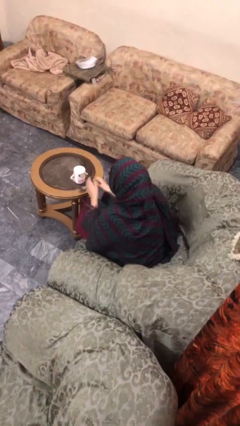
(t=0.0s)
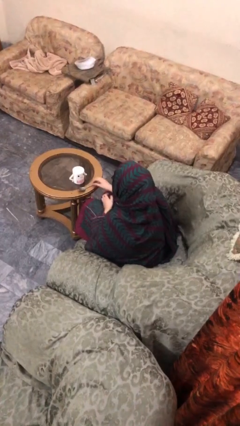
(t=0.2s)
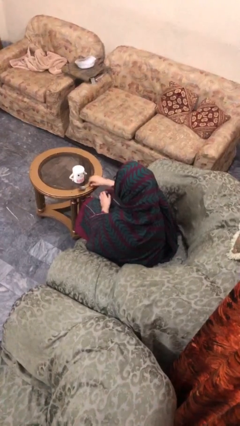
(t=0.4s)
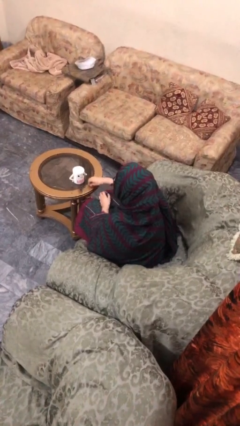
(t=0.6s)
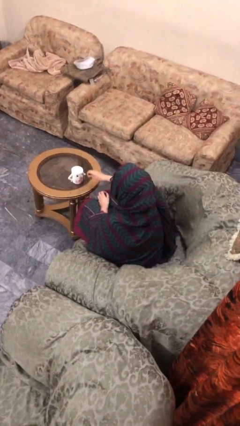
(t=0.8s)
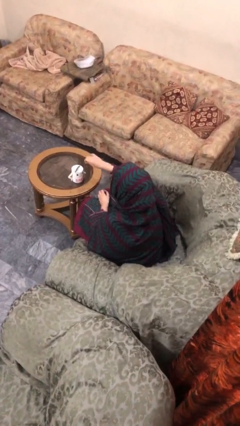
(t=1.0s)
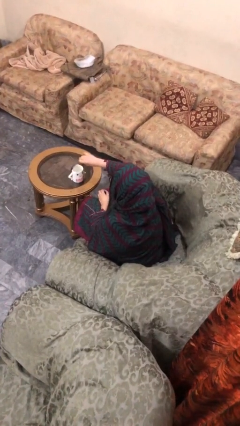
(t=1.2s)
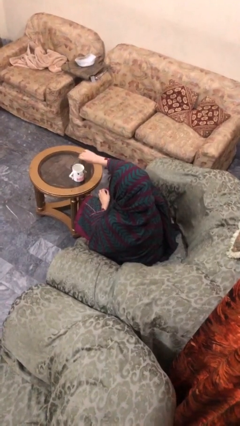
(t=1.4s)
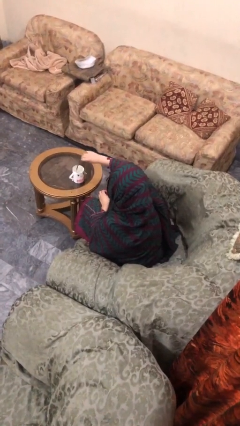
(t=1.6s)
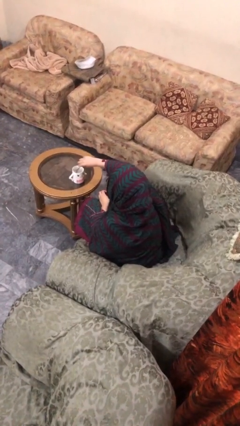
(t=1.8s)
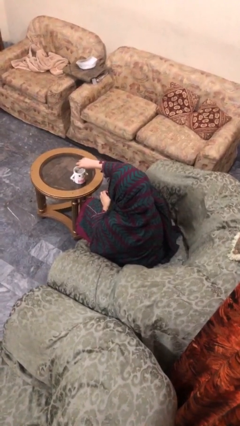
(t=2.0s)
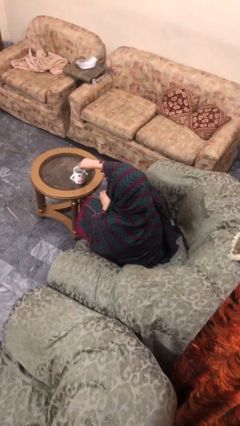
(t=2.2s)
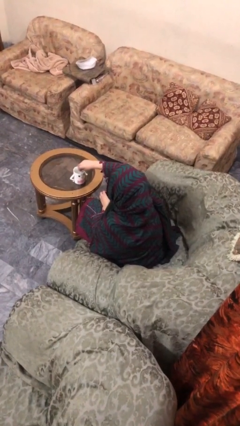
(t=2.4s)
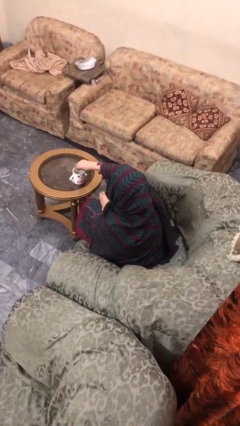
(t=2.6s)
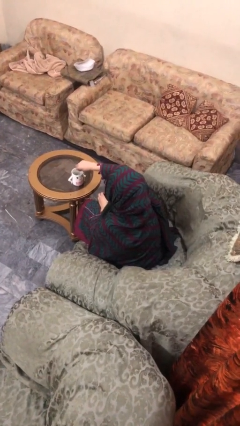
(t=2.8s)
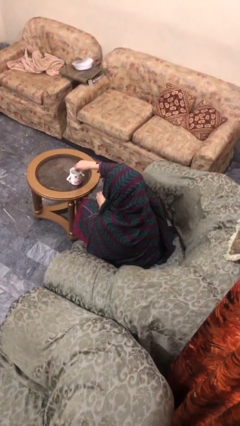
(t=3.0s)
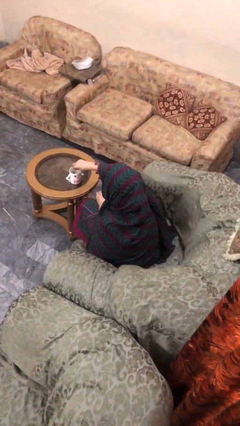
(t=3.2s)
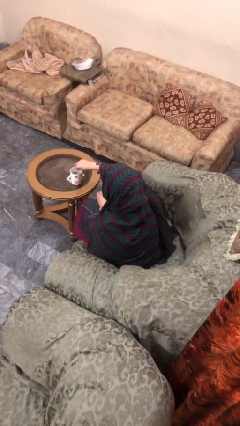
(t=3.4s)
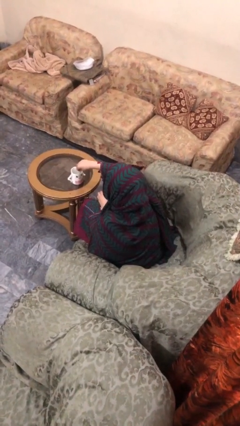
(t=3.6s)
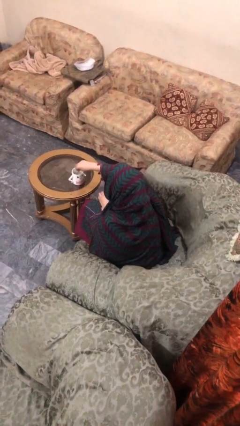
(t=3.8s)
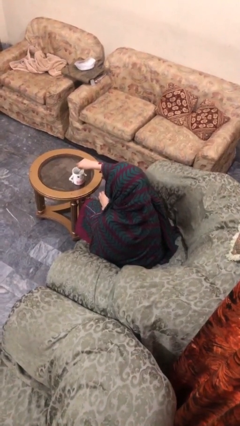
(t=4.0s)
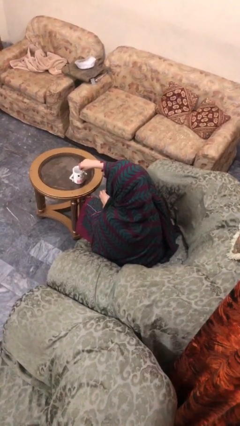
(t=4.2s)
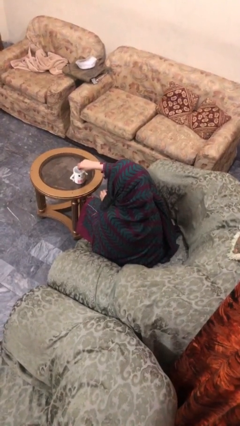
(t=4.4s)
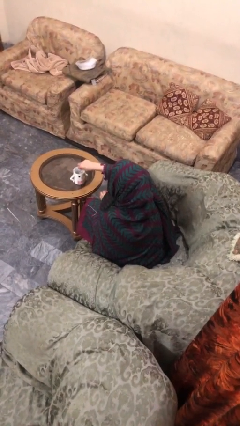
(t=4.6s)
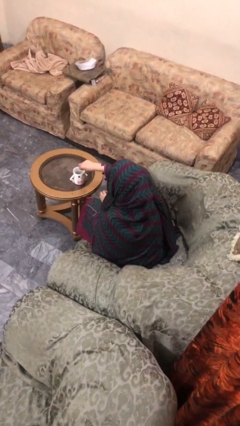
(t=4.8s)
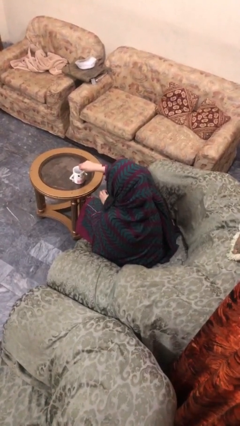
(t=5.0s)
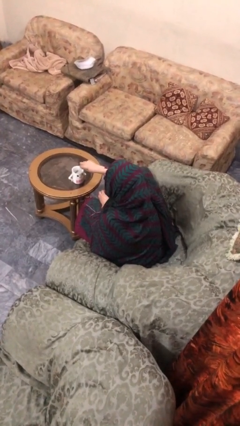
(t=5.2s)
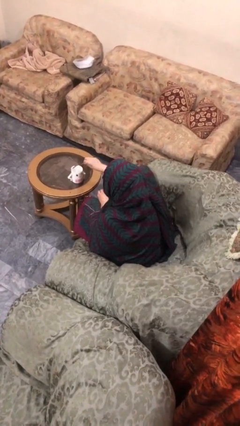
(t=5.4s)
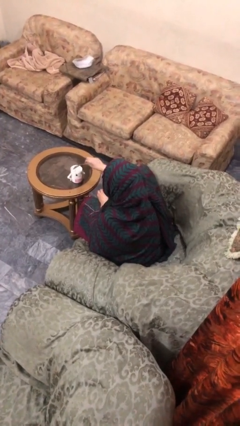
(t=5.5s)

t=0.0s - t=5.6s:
person stirs mug

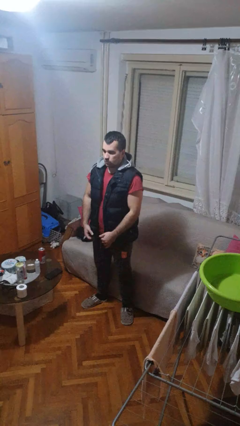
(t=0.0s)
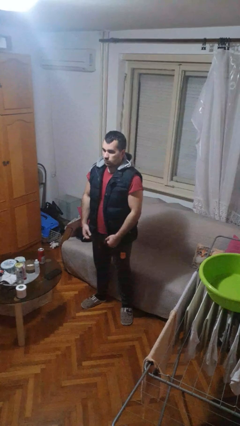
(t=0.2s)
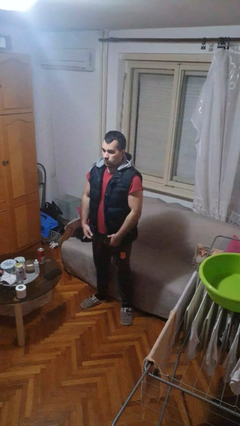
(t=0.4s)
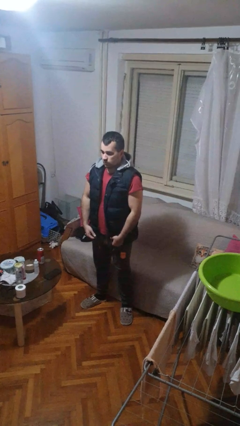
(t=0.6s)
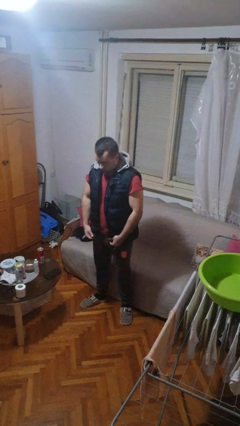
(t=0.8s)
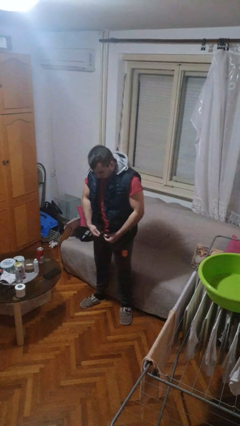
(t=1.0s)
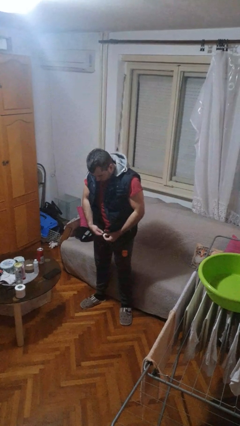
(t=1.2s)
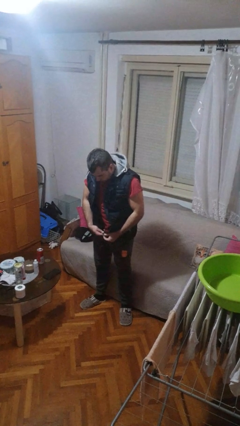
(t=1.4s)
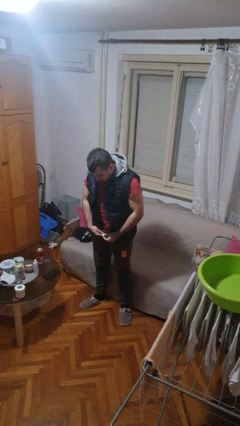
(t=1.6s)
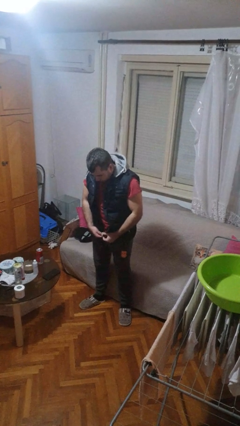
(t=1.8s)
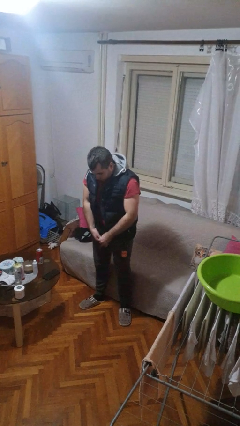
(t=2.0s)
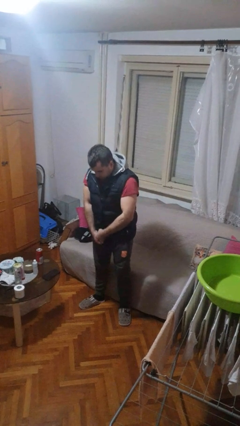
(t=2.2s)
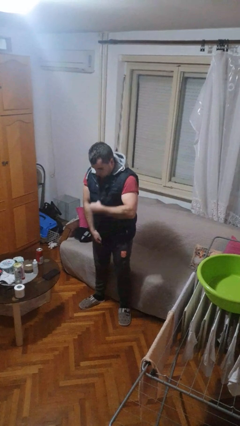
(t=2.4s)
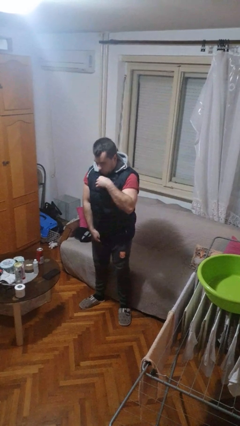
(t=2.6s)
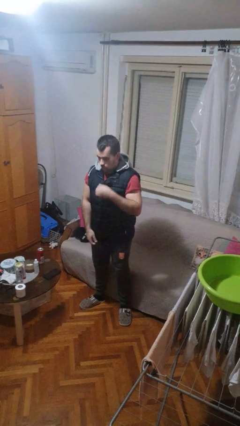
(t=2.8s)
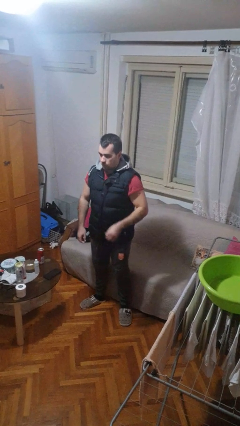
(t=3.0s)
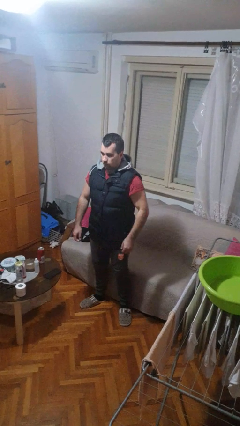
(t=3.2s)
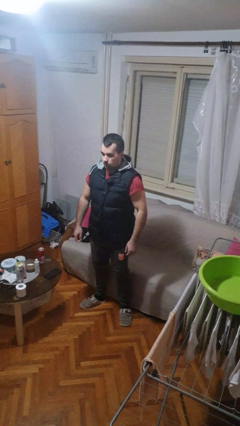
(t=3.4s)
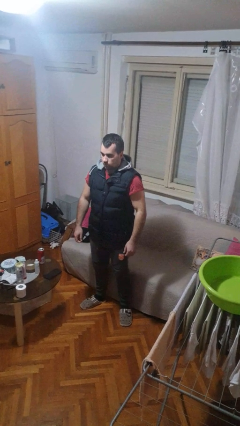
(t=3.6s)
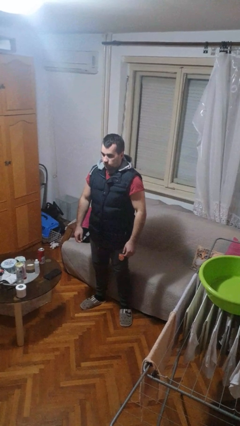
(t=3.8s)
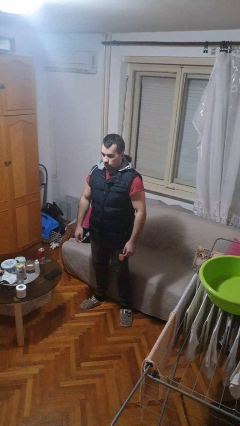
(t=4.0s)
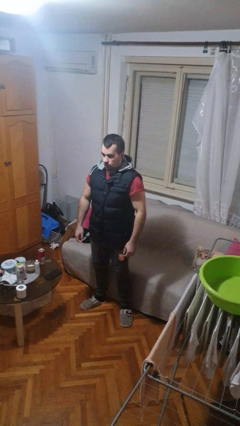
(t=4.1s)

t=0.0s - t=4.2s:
person zips up jacket

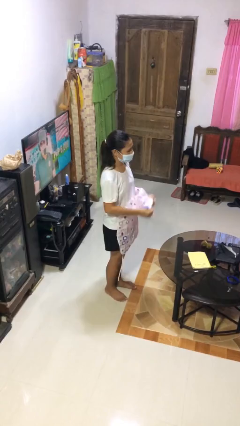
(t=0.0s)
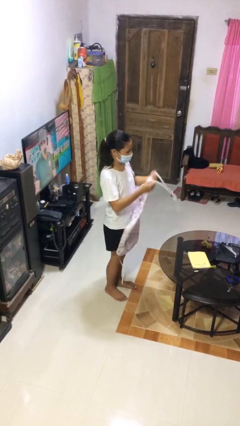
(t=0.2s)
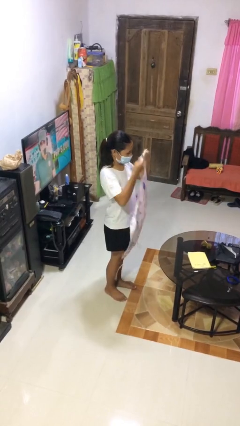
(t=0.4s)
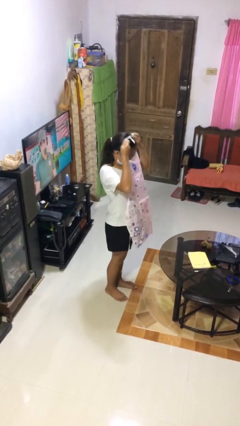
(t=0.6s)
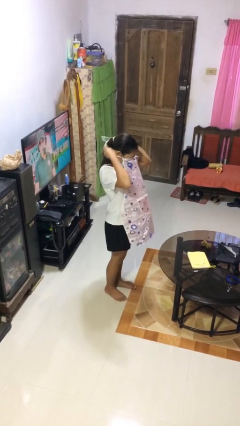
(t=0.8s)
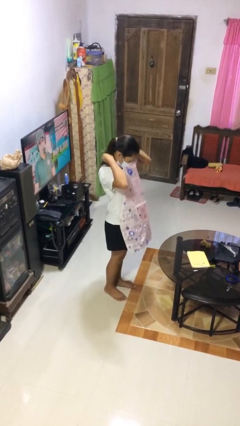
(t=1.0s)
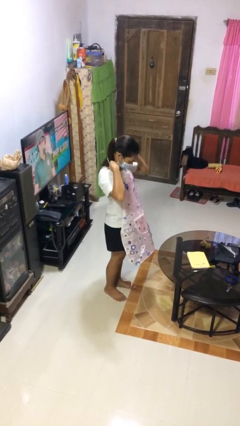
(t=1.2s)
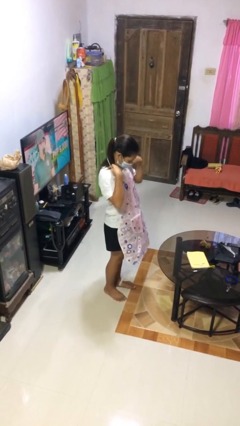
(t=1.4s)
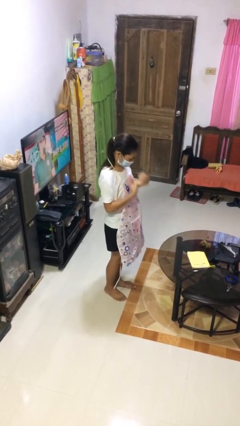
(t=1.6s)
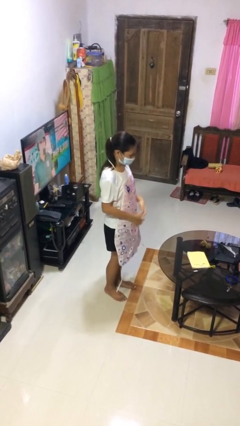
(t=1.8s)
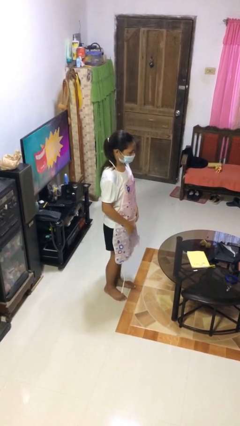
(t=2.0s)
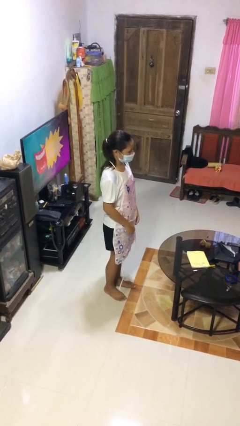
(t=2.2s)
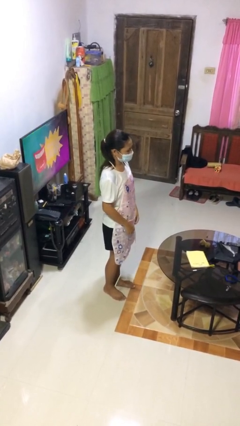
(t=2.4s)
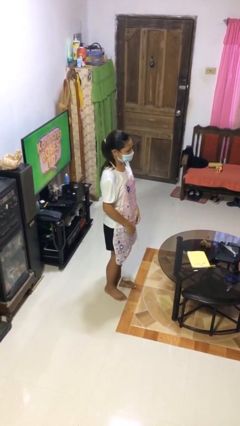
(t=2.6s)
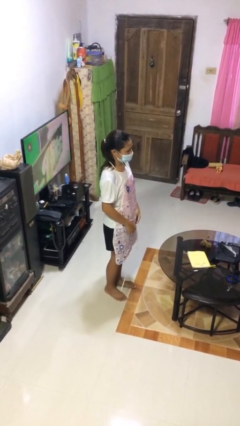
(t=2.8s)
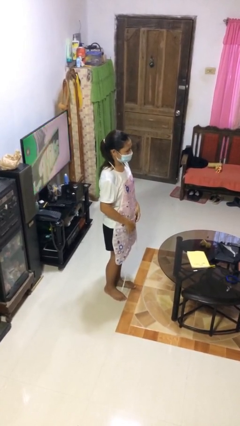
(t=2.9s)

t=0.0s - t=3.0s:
person puts on apron

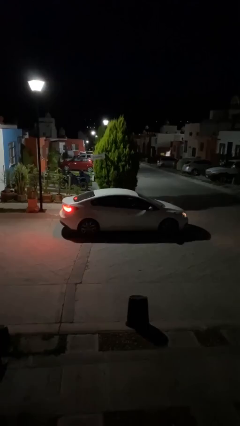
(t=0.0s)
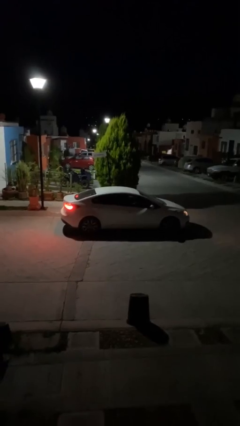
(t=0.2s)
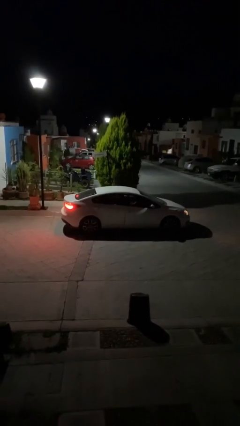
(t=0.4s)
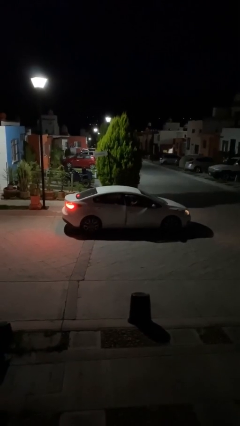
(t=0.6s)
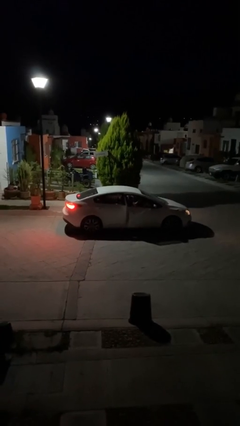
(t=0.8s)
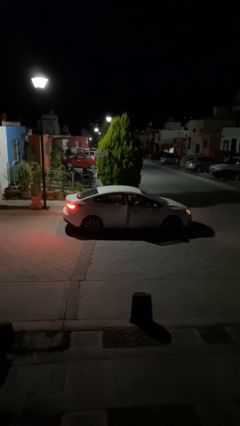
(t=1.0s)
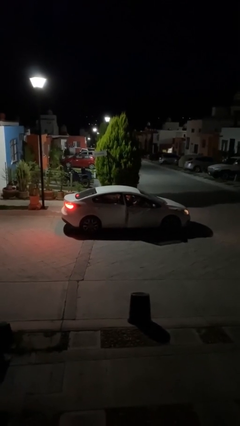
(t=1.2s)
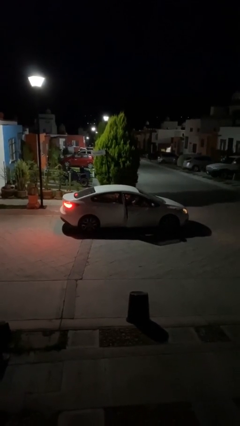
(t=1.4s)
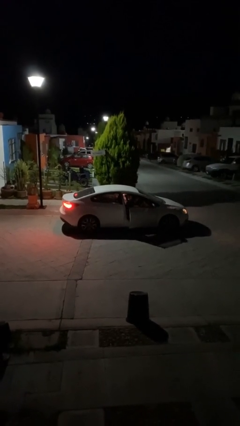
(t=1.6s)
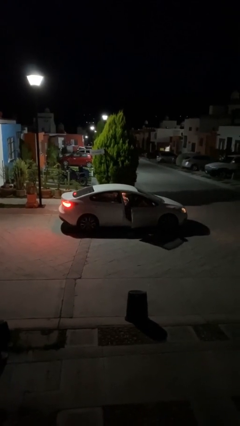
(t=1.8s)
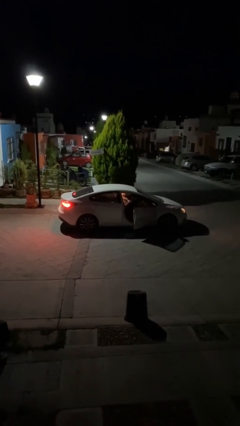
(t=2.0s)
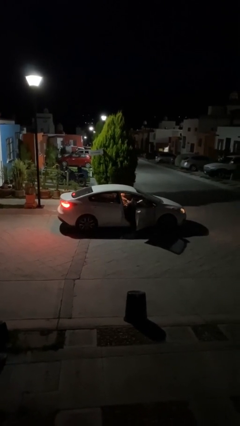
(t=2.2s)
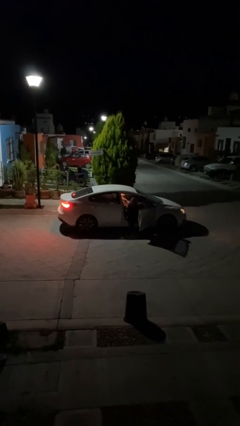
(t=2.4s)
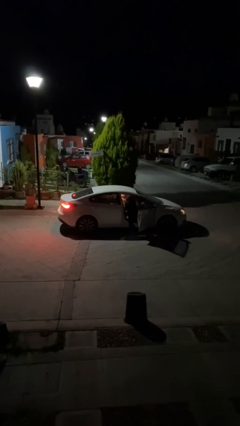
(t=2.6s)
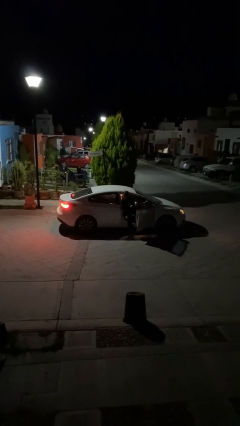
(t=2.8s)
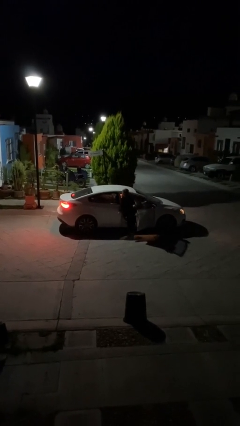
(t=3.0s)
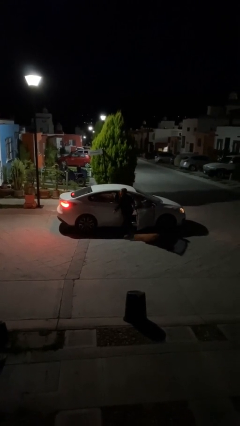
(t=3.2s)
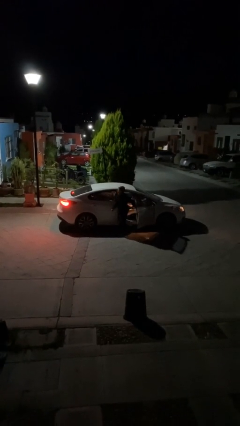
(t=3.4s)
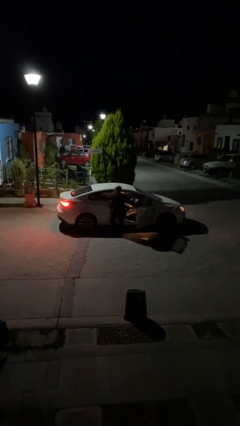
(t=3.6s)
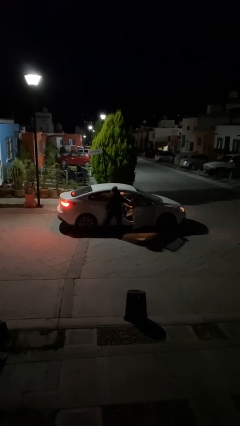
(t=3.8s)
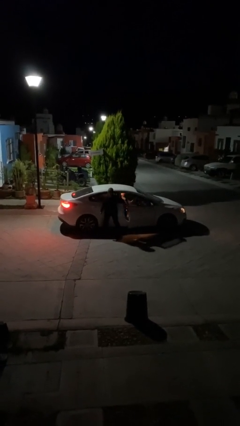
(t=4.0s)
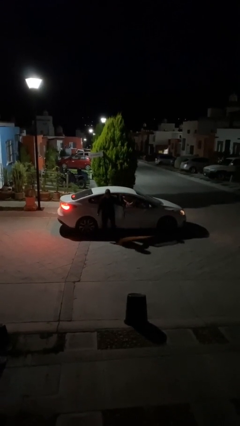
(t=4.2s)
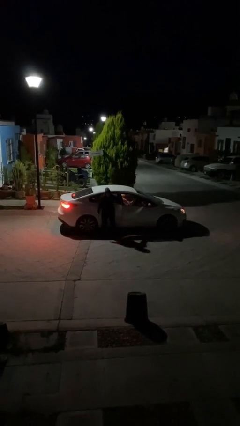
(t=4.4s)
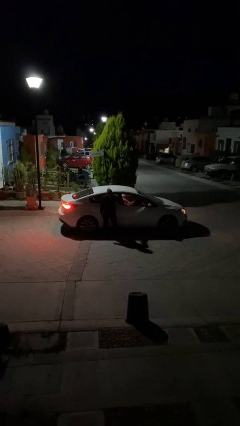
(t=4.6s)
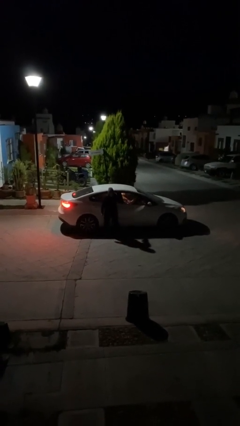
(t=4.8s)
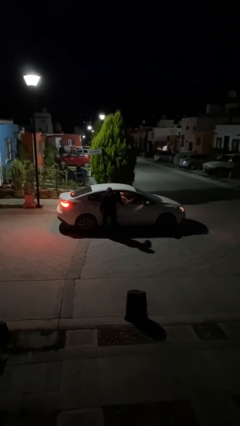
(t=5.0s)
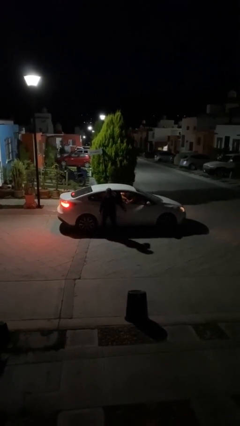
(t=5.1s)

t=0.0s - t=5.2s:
car drops off person
